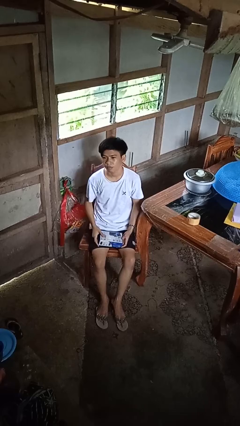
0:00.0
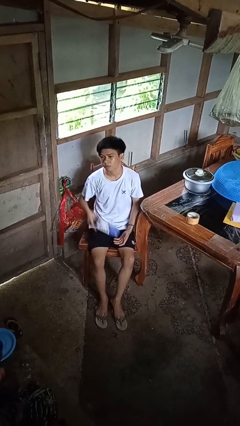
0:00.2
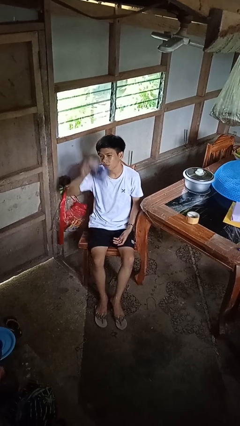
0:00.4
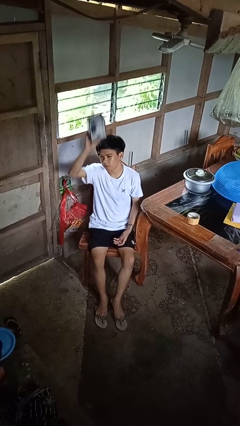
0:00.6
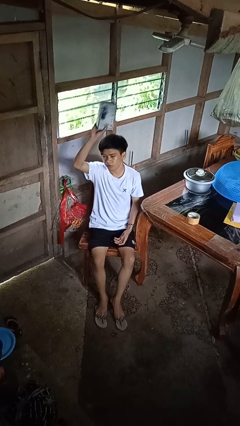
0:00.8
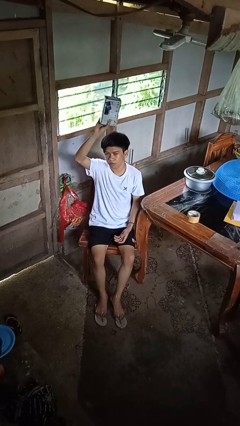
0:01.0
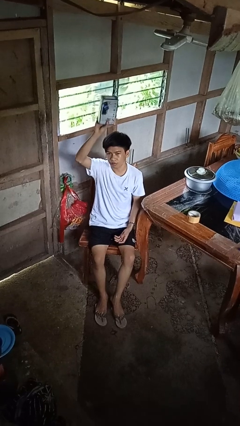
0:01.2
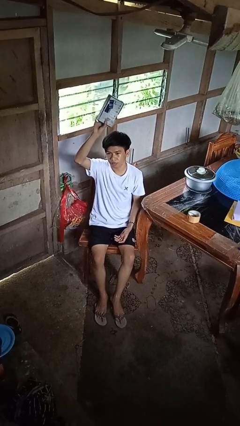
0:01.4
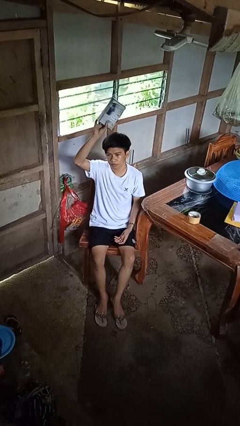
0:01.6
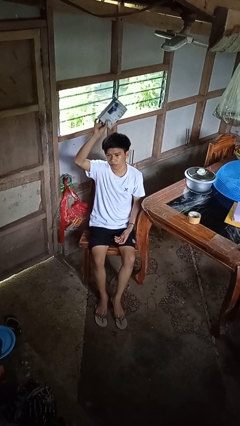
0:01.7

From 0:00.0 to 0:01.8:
person holds object above head

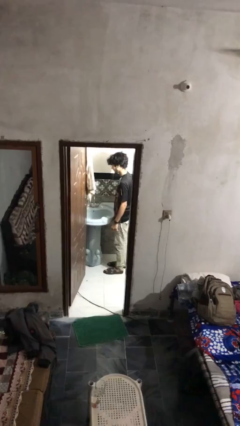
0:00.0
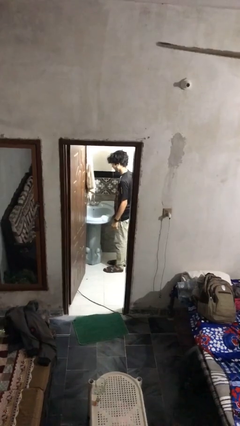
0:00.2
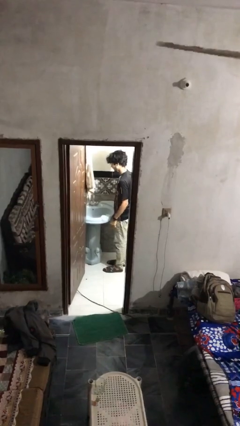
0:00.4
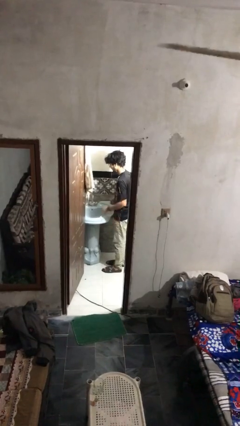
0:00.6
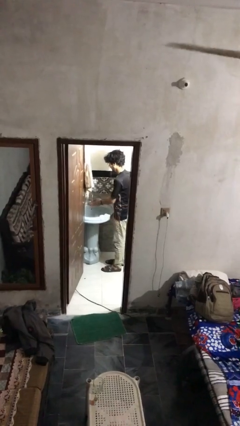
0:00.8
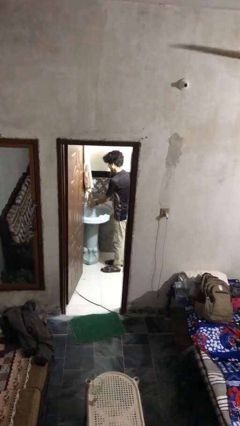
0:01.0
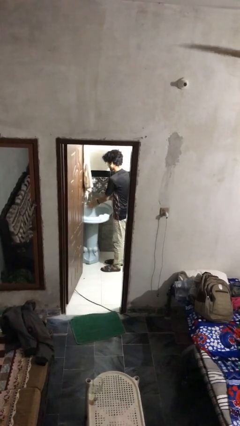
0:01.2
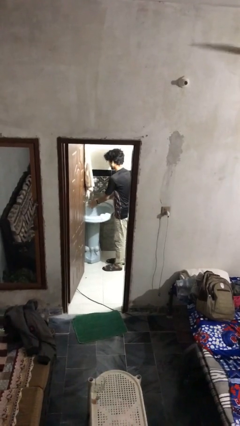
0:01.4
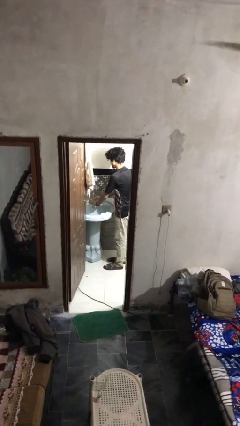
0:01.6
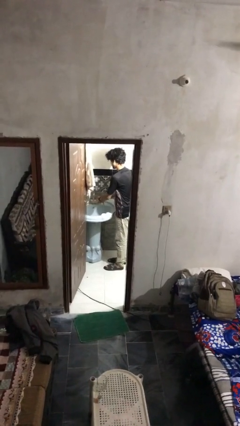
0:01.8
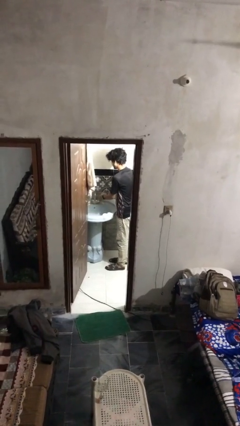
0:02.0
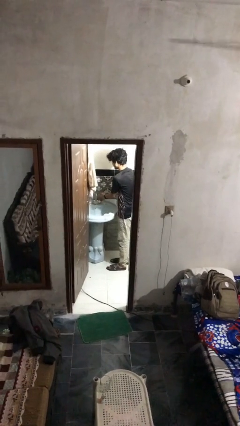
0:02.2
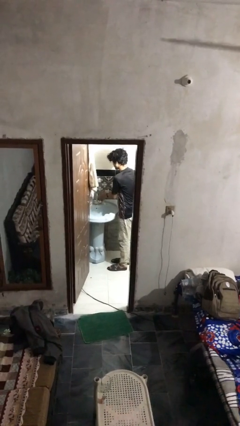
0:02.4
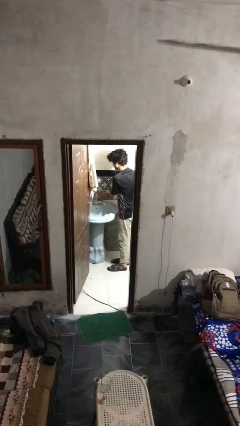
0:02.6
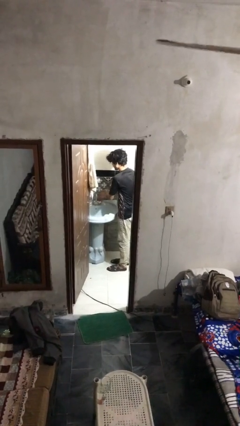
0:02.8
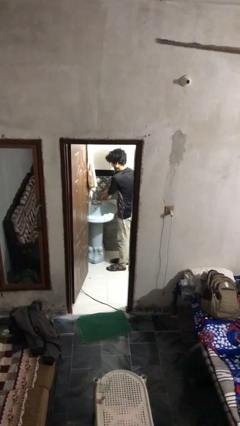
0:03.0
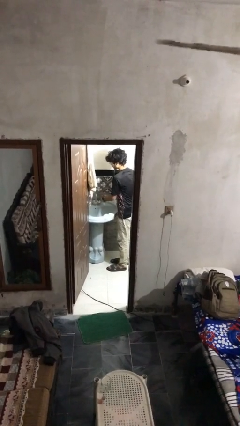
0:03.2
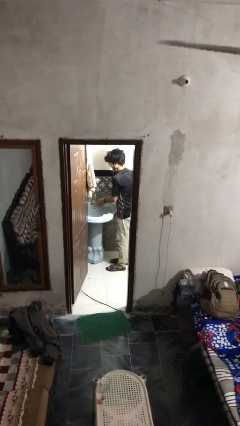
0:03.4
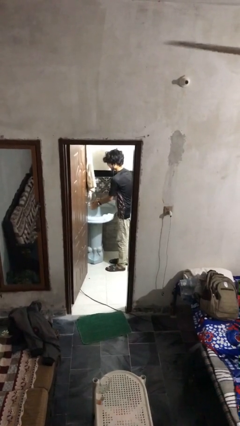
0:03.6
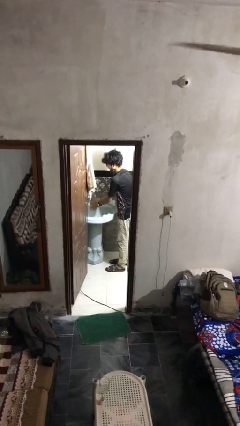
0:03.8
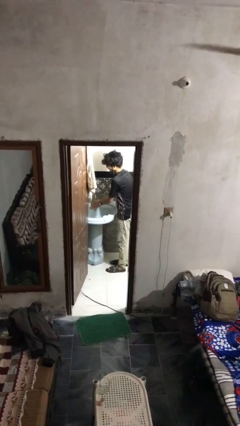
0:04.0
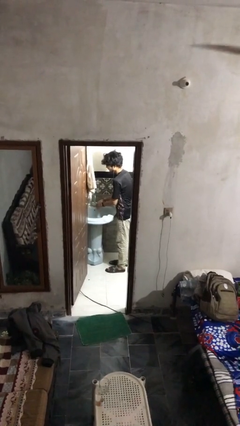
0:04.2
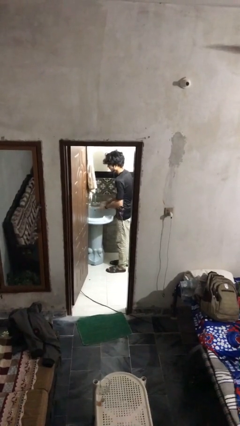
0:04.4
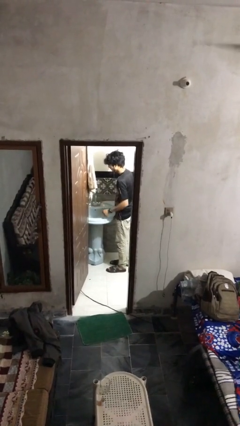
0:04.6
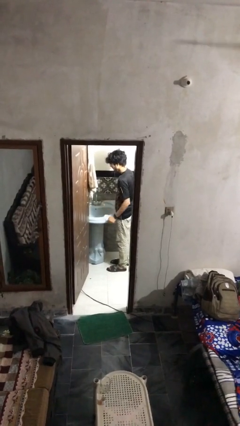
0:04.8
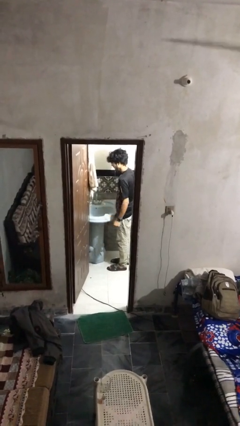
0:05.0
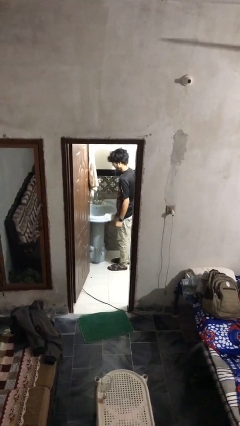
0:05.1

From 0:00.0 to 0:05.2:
person washes hands

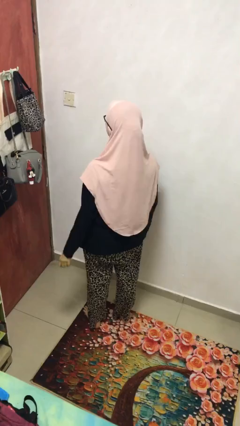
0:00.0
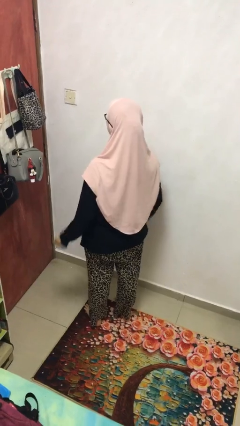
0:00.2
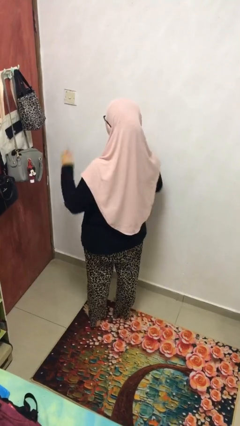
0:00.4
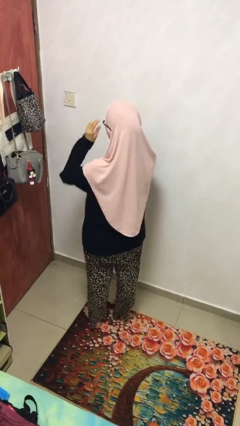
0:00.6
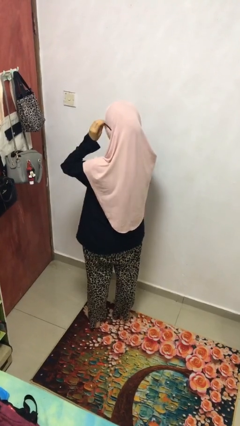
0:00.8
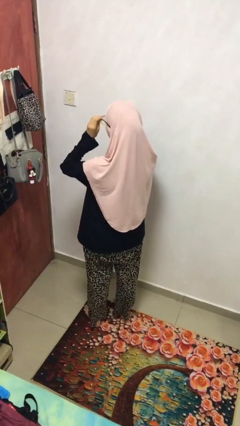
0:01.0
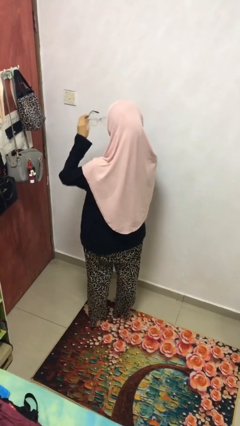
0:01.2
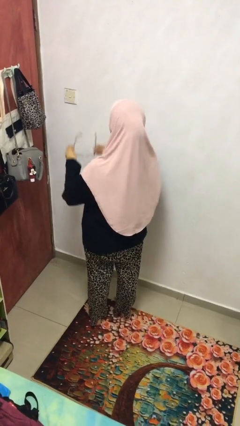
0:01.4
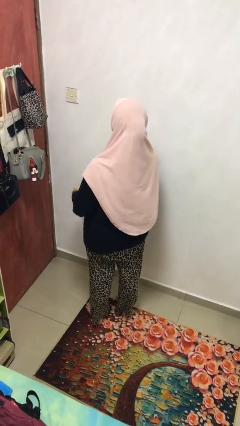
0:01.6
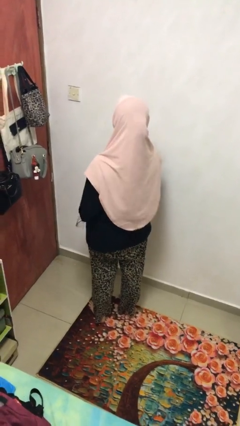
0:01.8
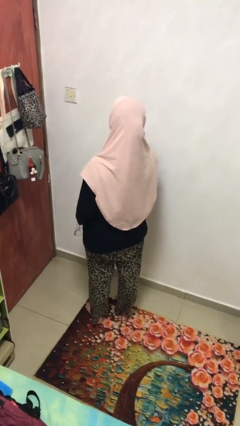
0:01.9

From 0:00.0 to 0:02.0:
person takes off glasses

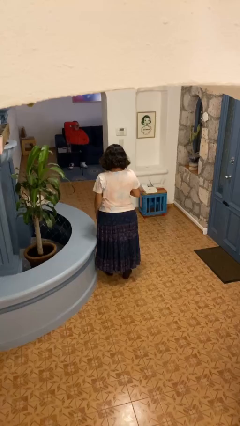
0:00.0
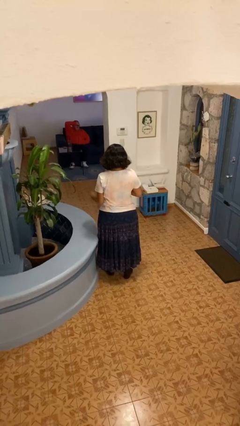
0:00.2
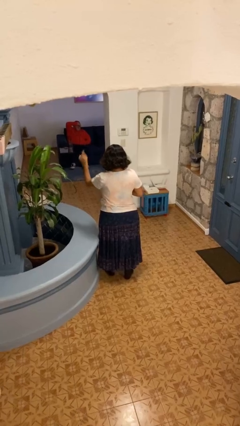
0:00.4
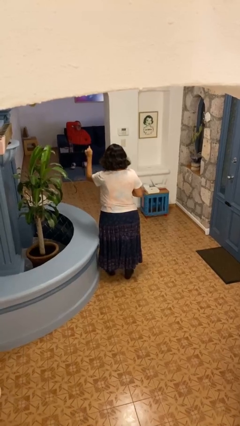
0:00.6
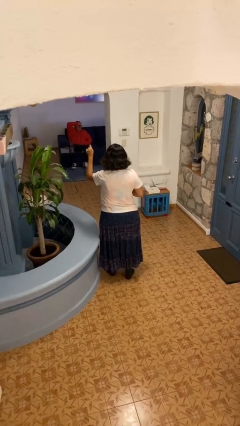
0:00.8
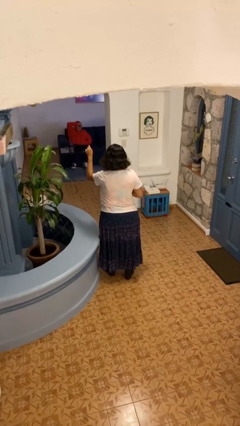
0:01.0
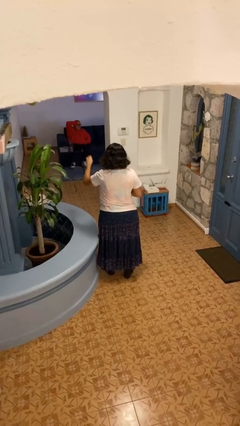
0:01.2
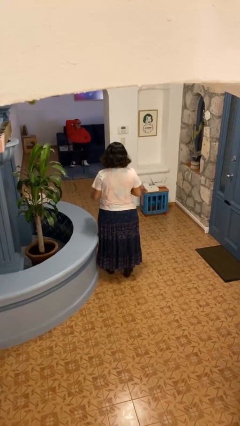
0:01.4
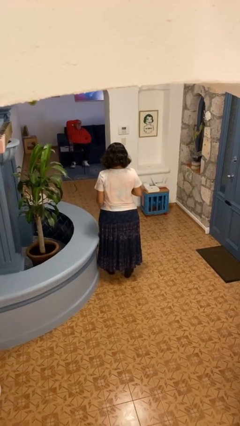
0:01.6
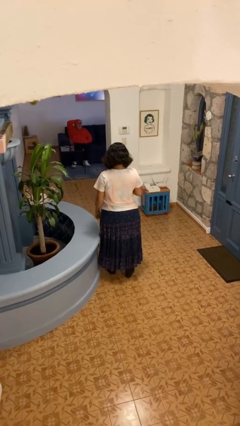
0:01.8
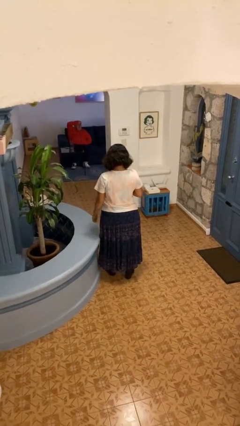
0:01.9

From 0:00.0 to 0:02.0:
person points at person

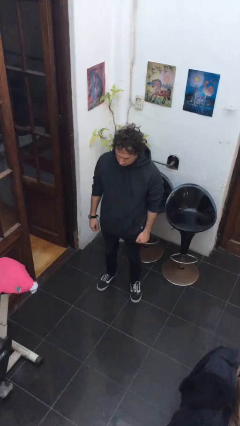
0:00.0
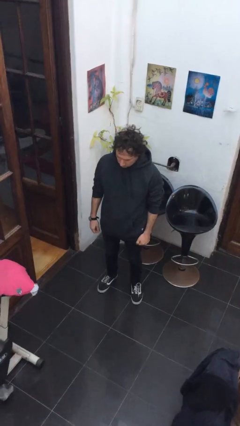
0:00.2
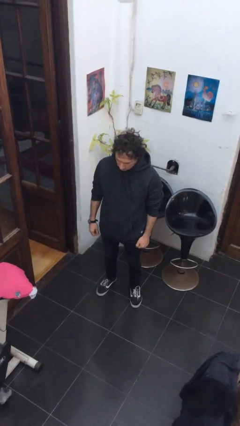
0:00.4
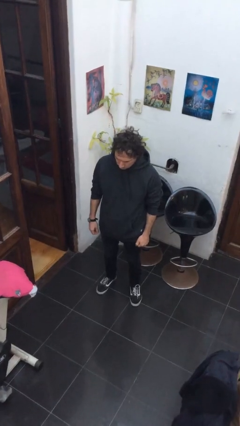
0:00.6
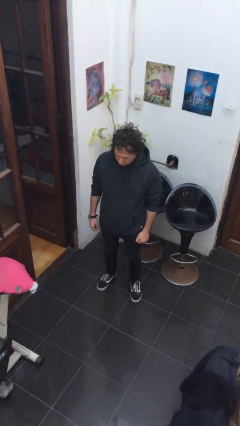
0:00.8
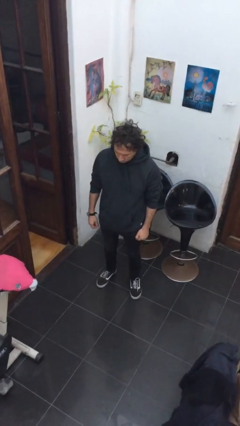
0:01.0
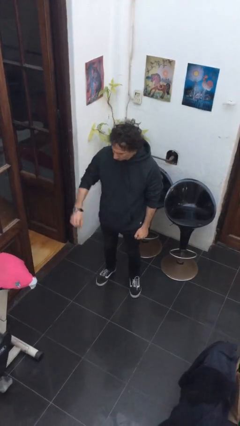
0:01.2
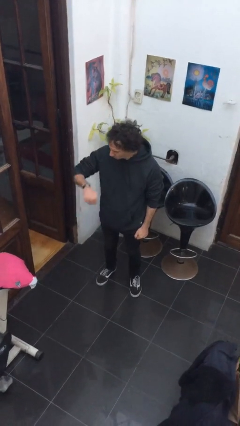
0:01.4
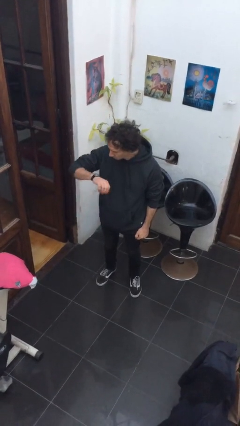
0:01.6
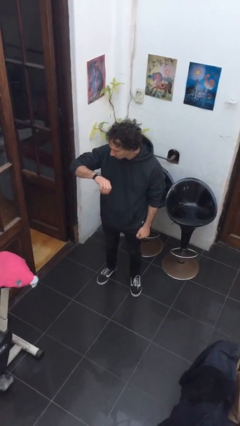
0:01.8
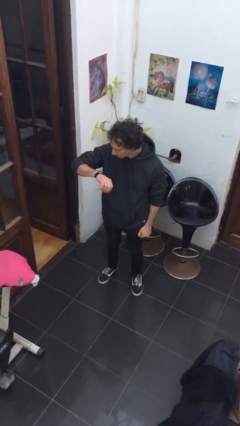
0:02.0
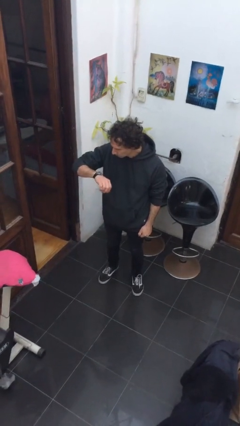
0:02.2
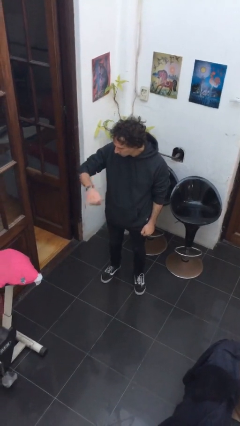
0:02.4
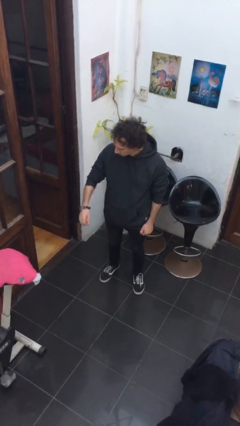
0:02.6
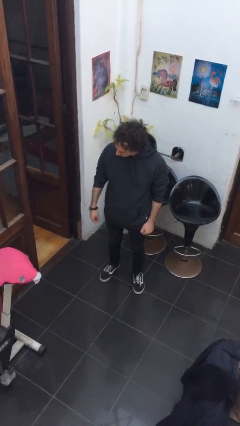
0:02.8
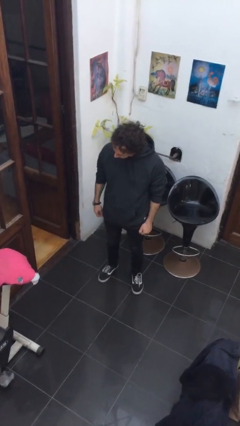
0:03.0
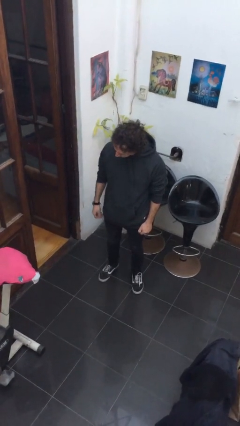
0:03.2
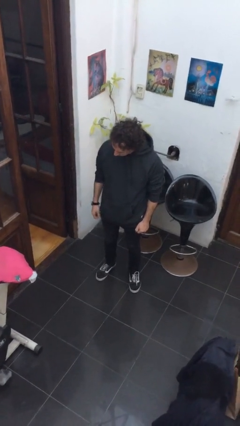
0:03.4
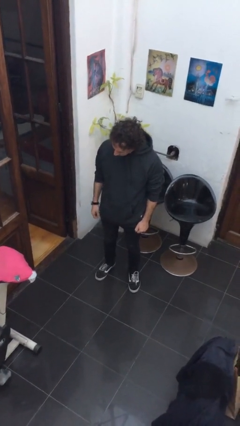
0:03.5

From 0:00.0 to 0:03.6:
person looks at wristwatch

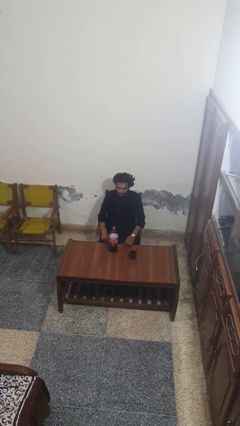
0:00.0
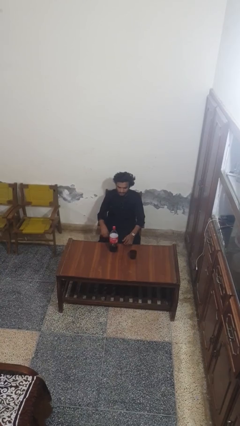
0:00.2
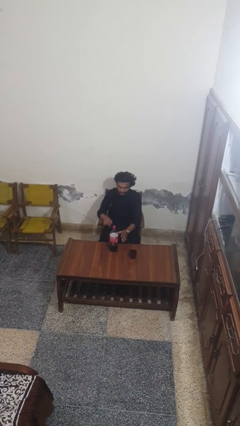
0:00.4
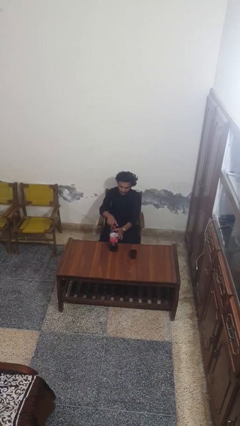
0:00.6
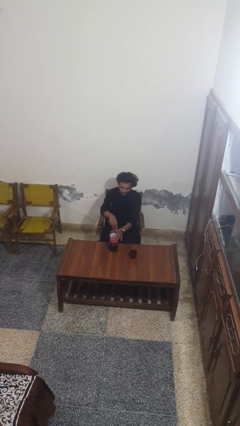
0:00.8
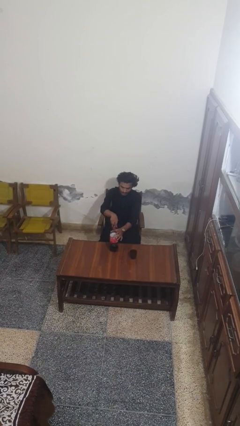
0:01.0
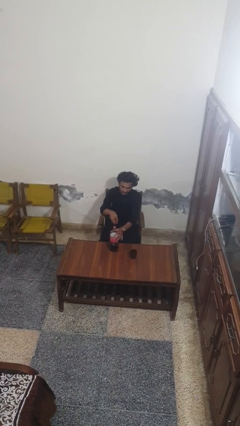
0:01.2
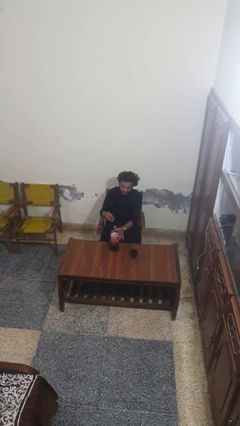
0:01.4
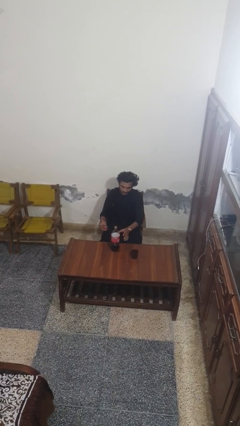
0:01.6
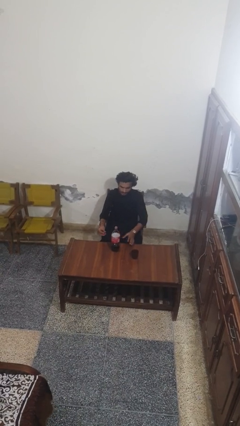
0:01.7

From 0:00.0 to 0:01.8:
person unscrews lid from bottle

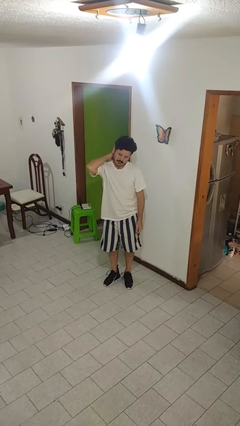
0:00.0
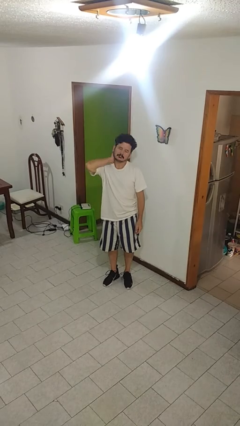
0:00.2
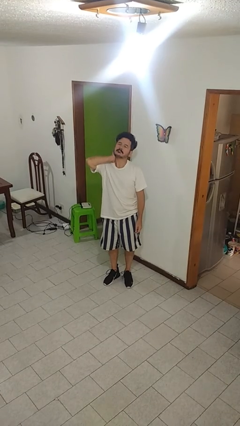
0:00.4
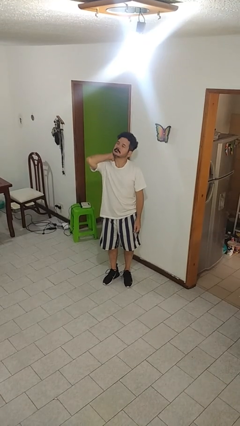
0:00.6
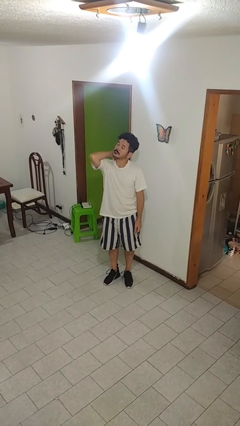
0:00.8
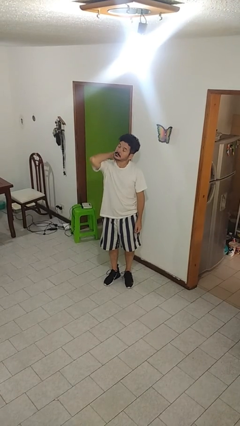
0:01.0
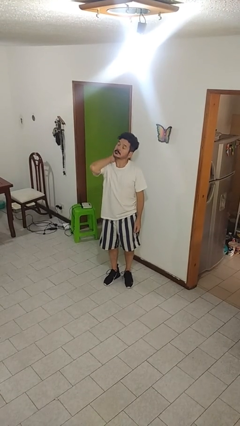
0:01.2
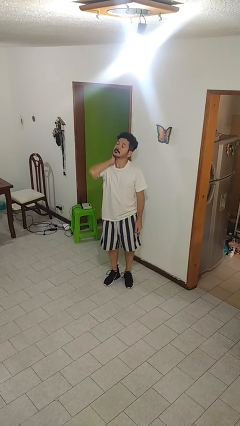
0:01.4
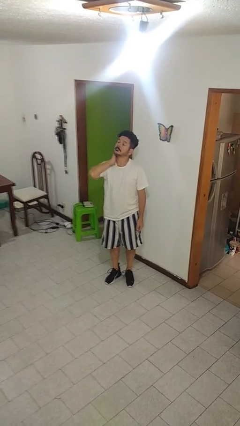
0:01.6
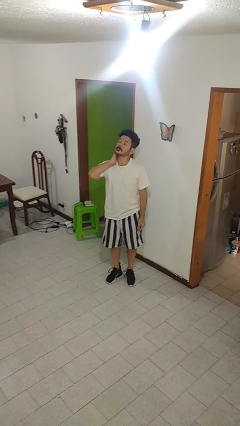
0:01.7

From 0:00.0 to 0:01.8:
person rubs neck
